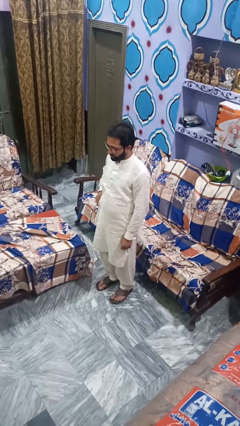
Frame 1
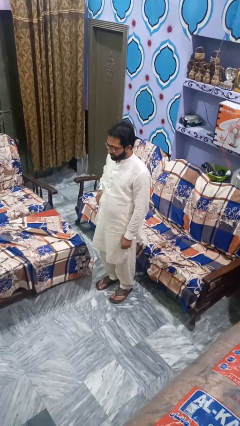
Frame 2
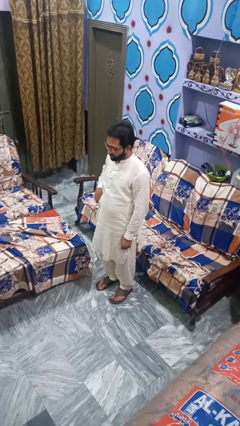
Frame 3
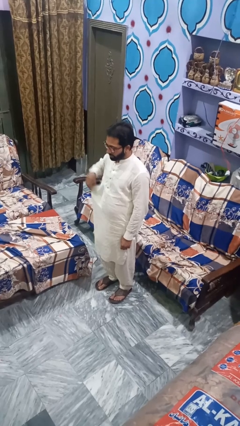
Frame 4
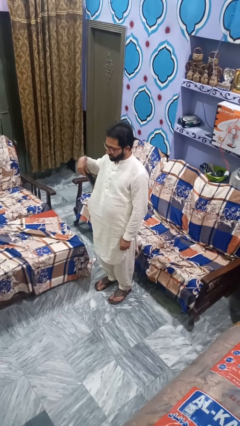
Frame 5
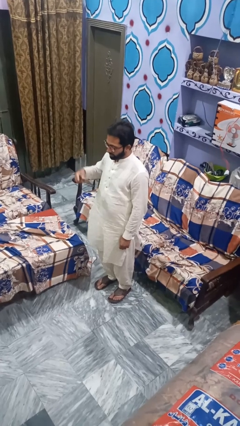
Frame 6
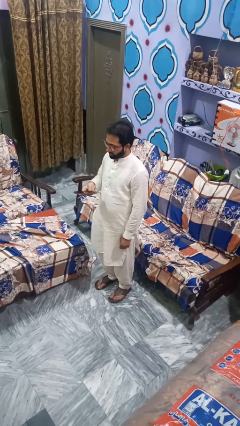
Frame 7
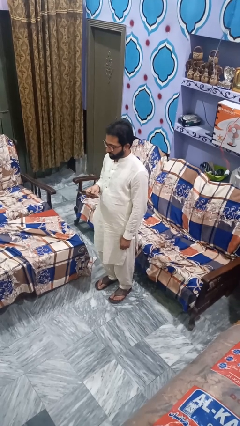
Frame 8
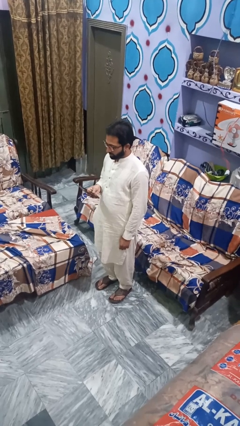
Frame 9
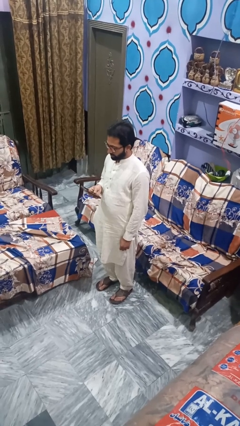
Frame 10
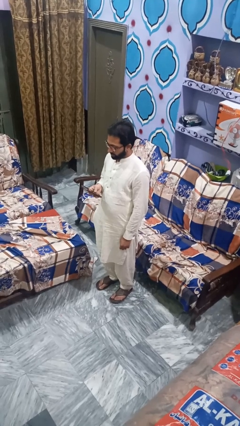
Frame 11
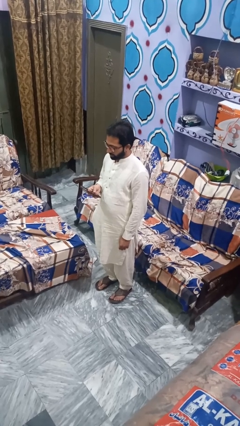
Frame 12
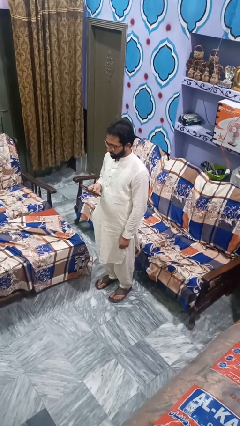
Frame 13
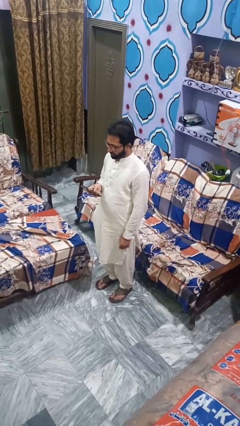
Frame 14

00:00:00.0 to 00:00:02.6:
person takes phone from pocket

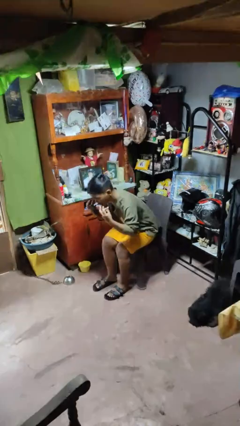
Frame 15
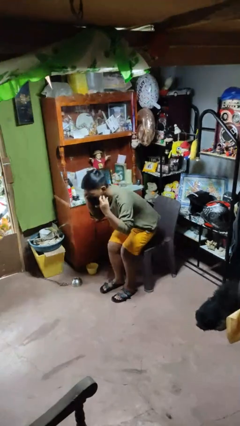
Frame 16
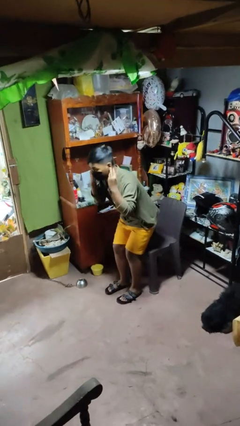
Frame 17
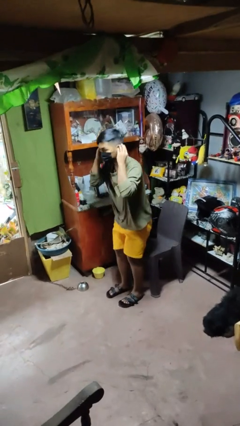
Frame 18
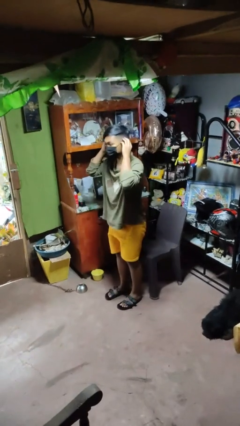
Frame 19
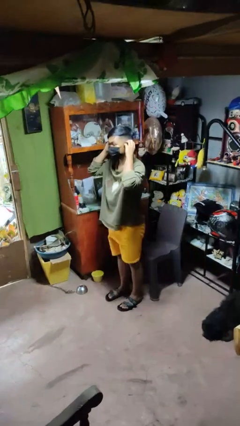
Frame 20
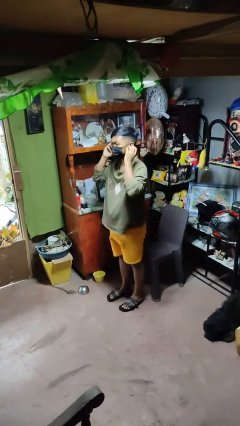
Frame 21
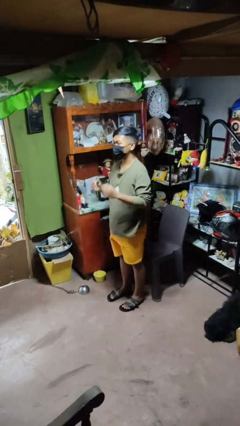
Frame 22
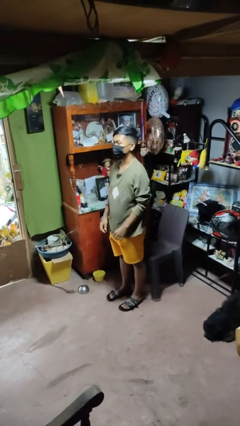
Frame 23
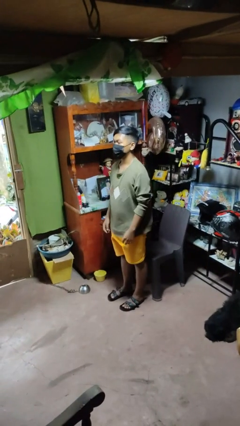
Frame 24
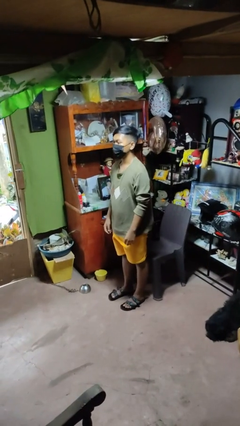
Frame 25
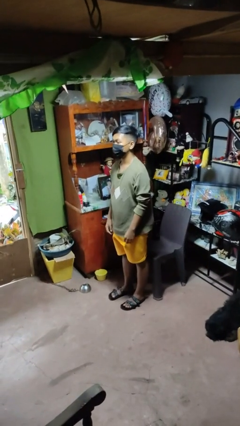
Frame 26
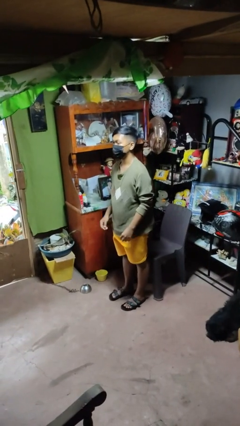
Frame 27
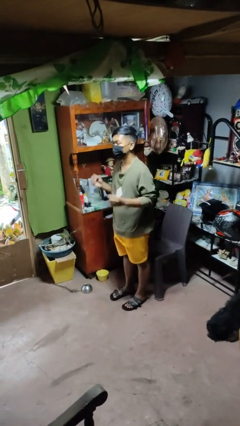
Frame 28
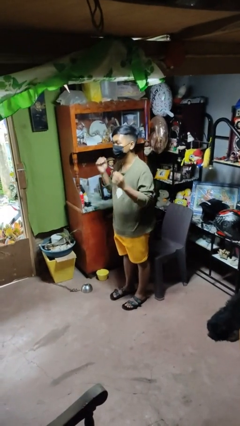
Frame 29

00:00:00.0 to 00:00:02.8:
person puts on facemask

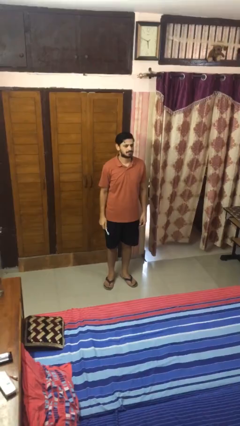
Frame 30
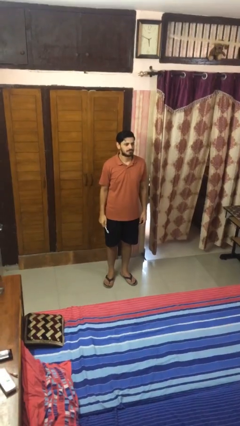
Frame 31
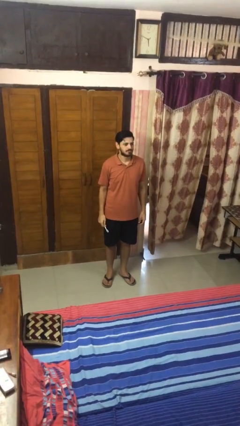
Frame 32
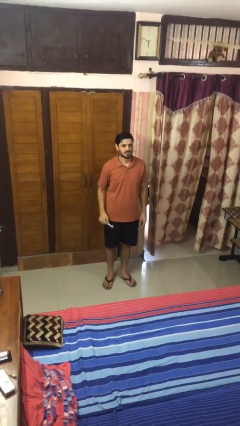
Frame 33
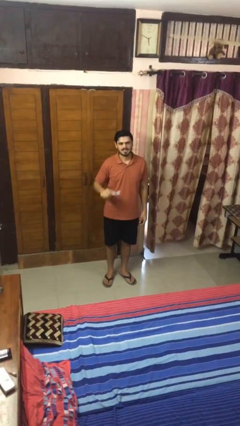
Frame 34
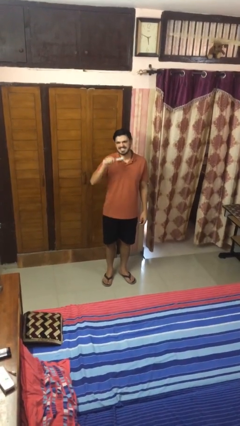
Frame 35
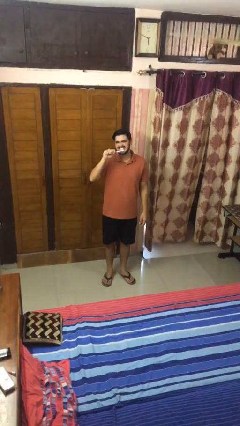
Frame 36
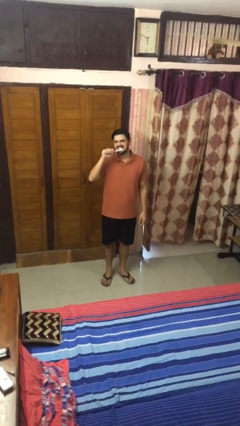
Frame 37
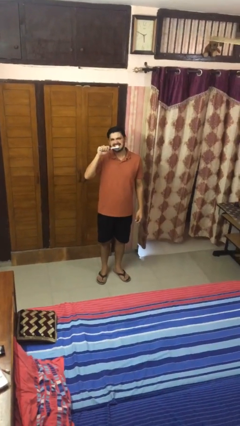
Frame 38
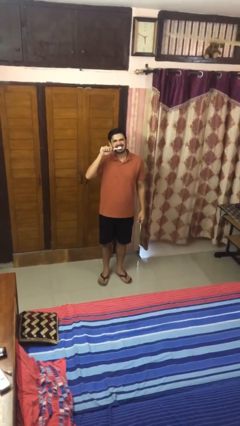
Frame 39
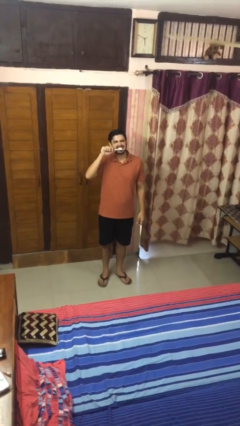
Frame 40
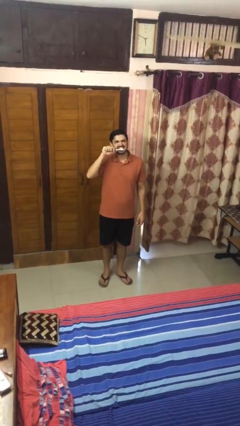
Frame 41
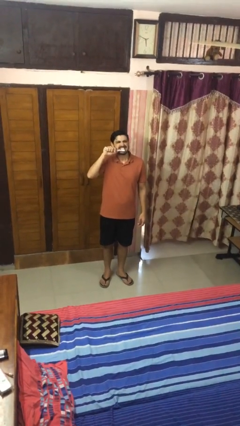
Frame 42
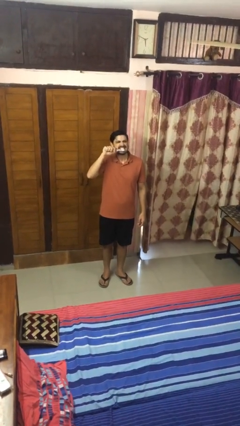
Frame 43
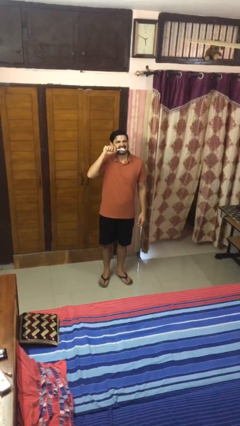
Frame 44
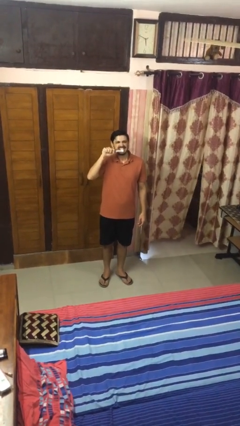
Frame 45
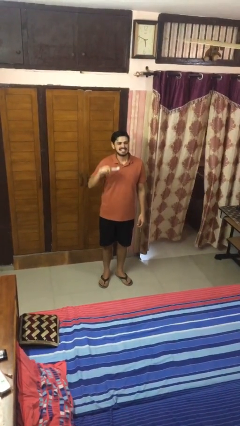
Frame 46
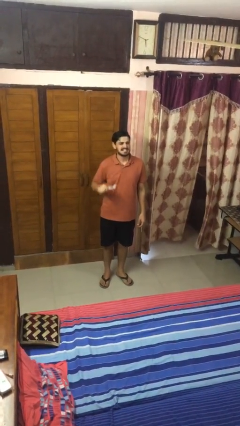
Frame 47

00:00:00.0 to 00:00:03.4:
person brushes teeth

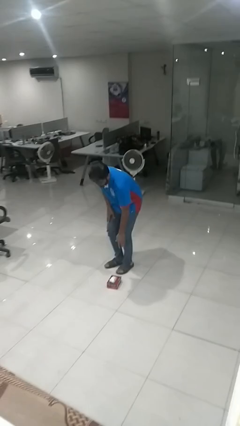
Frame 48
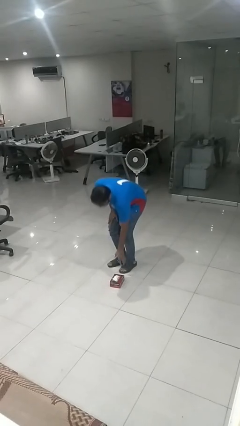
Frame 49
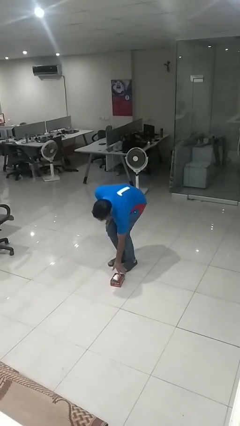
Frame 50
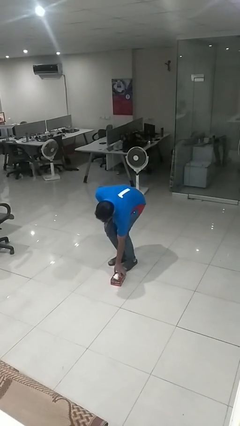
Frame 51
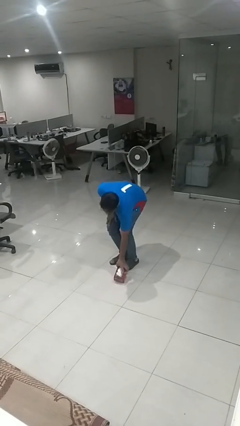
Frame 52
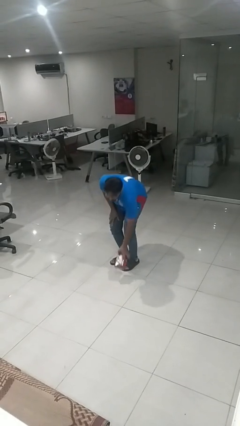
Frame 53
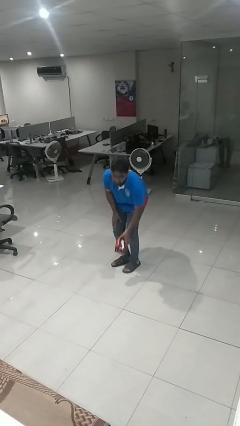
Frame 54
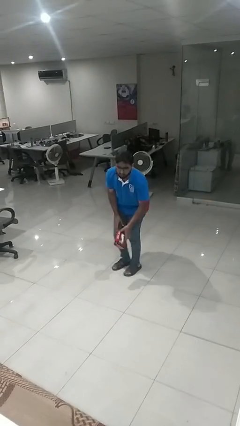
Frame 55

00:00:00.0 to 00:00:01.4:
person picks up object from floor

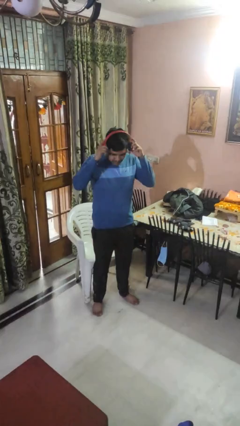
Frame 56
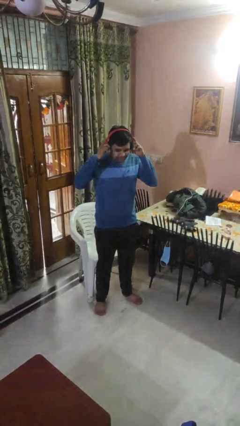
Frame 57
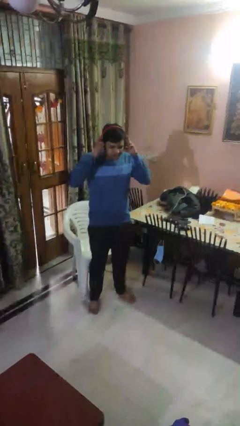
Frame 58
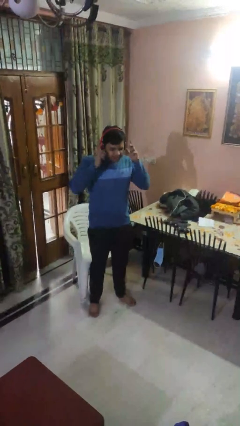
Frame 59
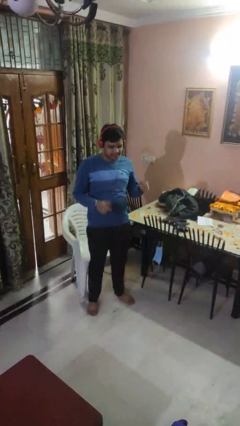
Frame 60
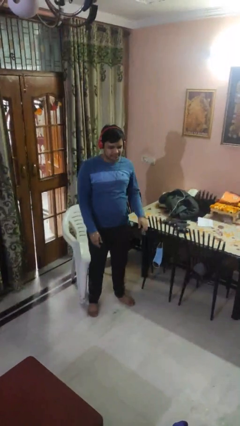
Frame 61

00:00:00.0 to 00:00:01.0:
person puts on headphones

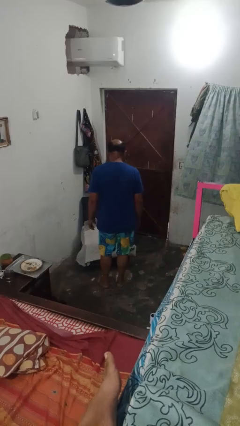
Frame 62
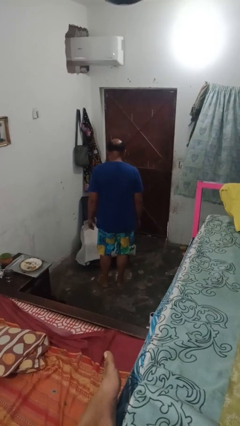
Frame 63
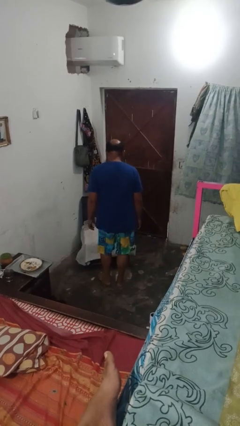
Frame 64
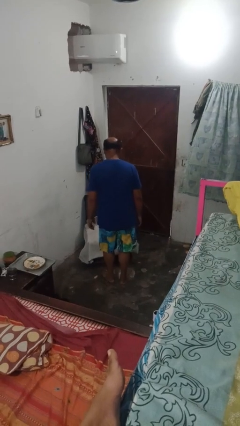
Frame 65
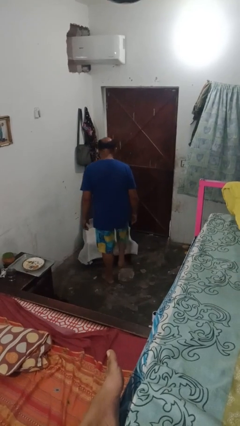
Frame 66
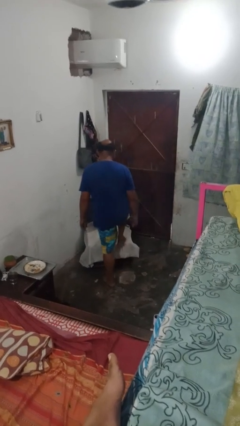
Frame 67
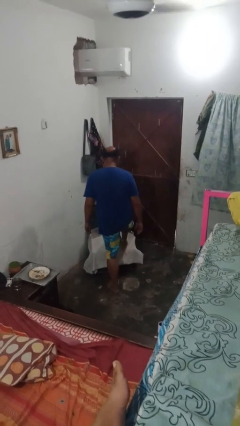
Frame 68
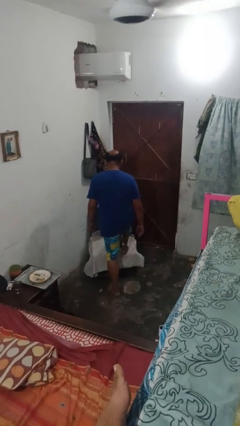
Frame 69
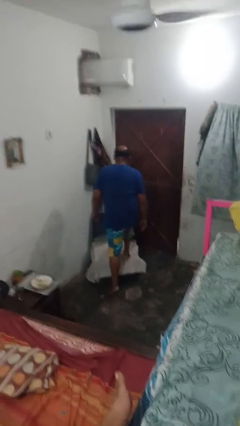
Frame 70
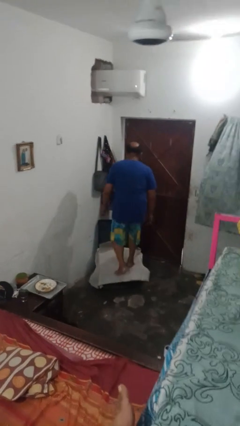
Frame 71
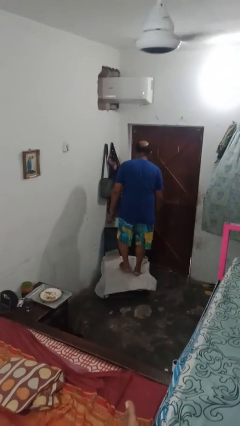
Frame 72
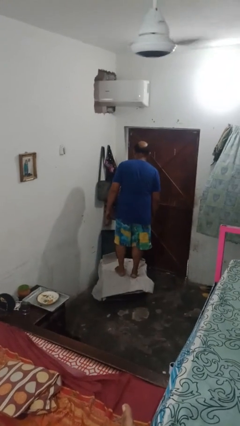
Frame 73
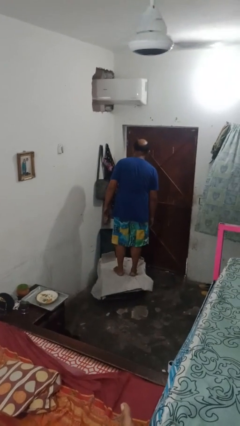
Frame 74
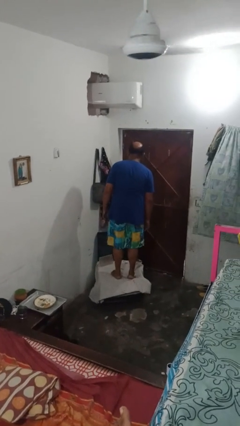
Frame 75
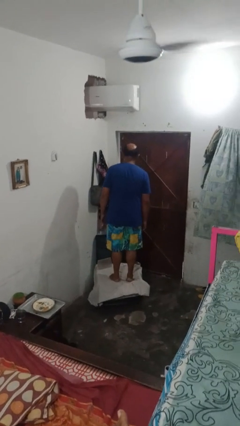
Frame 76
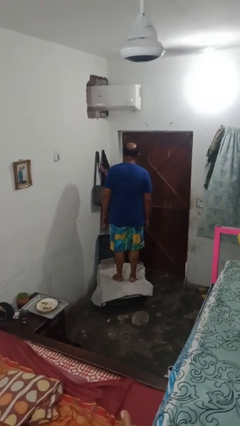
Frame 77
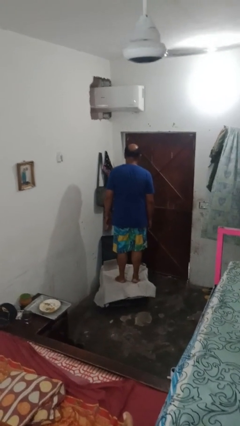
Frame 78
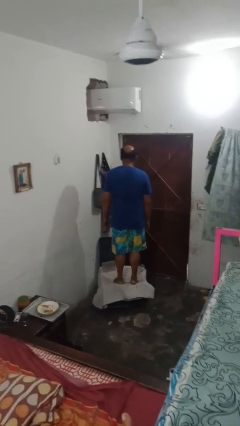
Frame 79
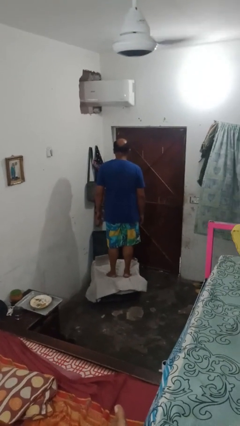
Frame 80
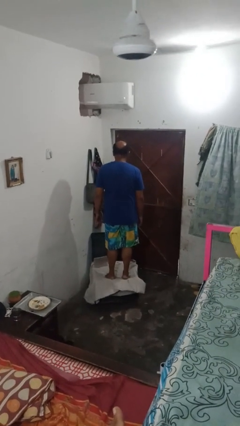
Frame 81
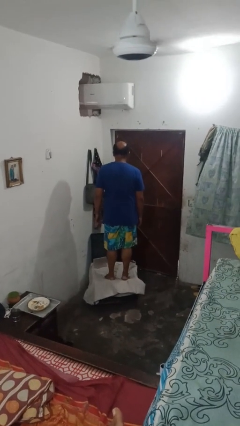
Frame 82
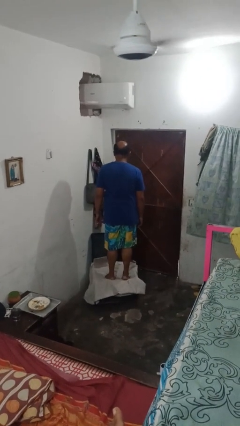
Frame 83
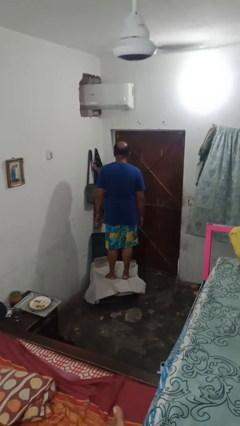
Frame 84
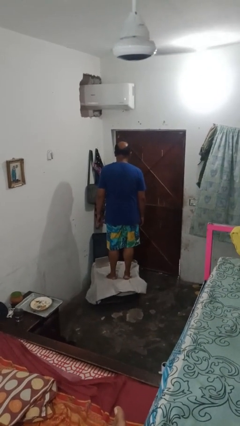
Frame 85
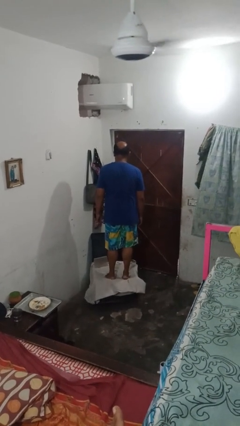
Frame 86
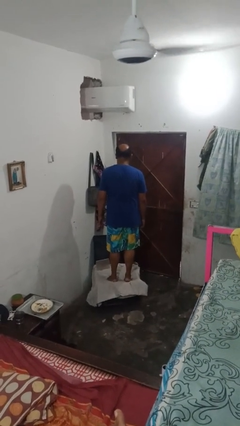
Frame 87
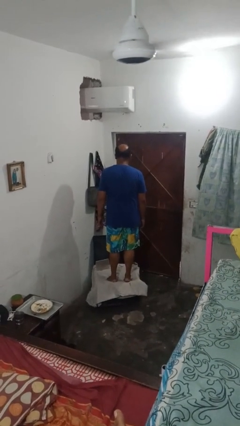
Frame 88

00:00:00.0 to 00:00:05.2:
person climbs on couch

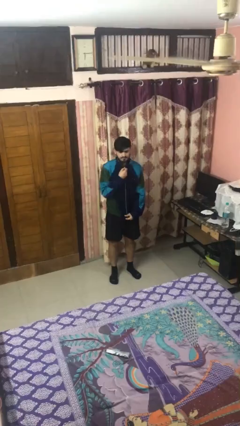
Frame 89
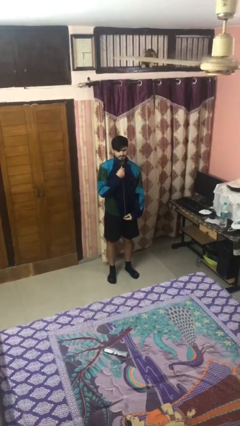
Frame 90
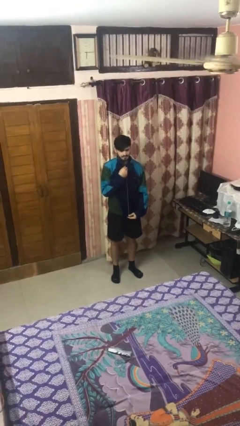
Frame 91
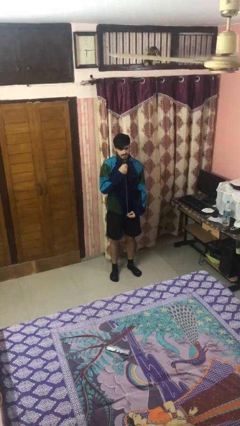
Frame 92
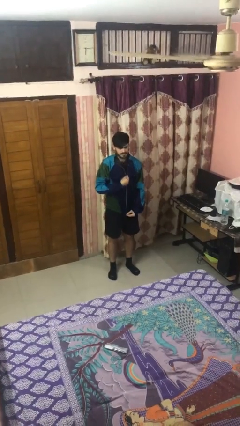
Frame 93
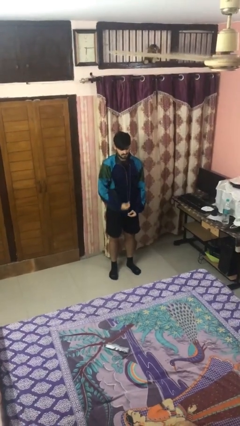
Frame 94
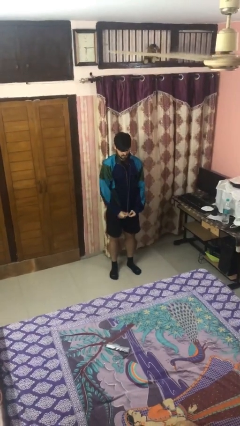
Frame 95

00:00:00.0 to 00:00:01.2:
person unzips jacket
